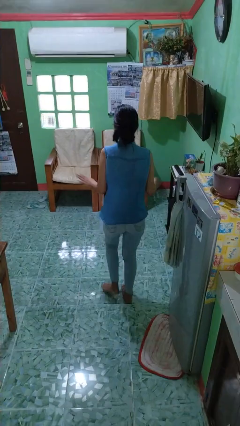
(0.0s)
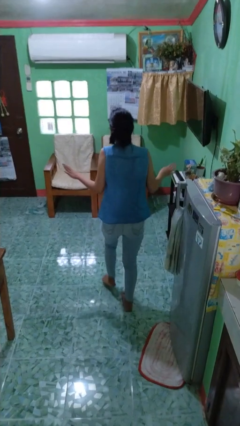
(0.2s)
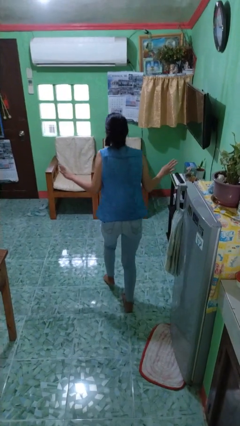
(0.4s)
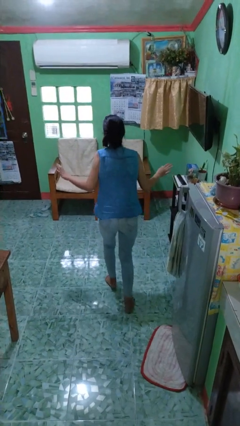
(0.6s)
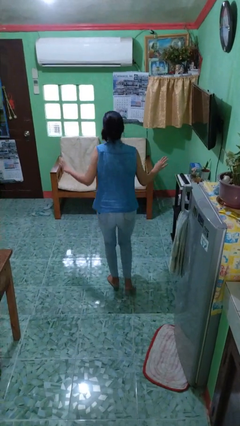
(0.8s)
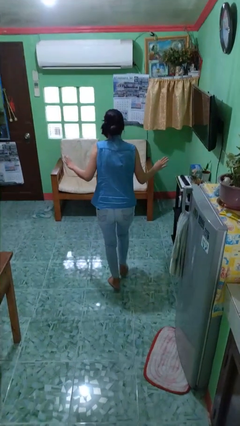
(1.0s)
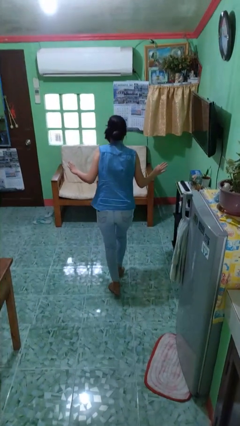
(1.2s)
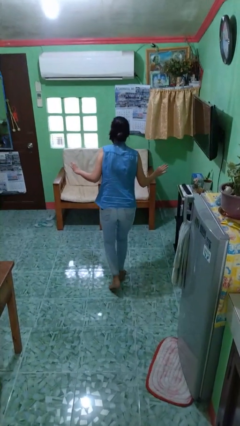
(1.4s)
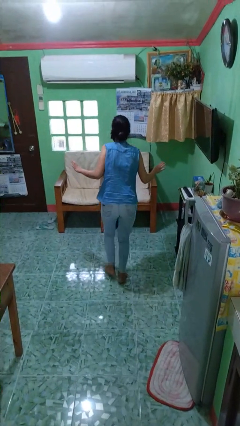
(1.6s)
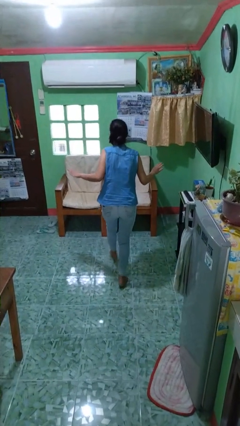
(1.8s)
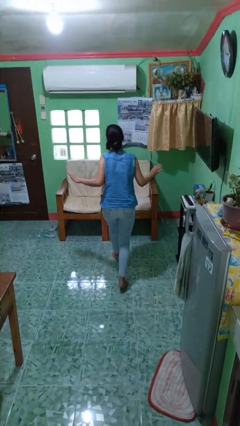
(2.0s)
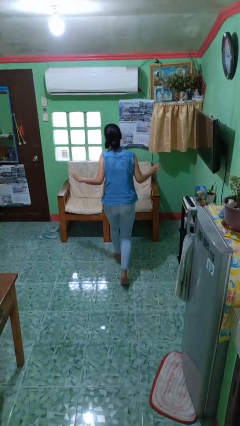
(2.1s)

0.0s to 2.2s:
person walks tiptoe

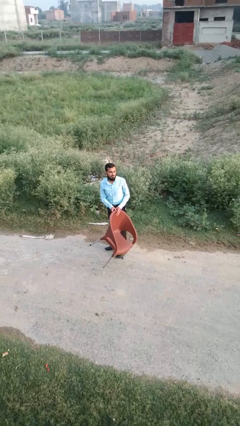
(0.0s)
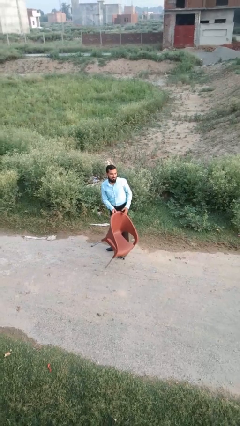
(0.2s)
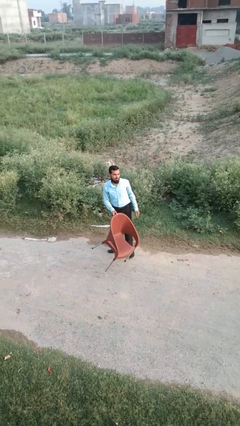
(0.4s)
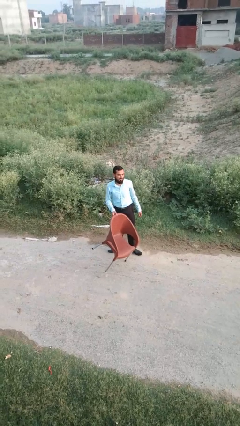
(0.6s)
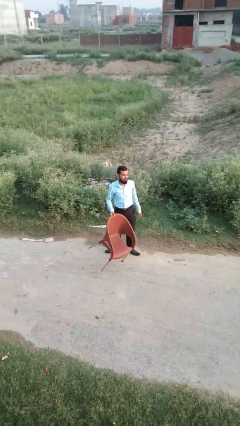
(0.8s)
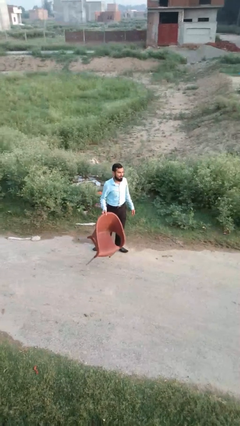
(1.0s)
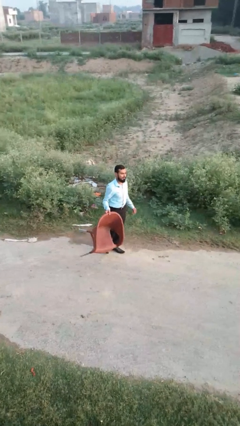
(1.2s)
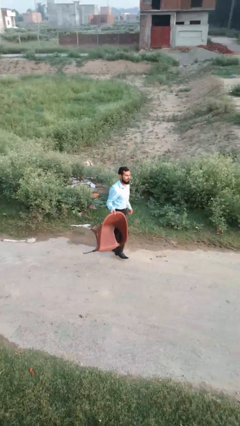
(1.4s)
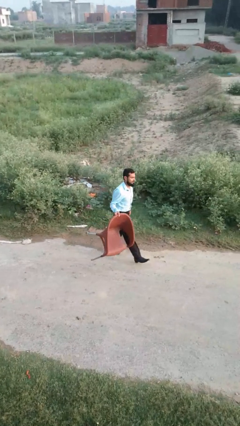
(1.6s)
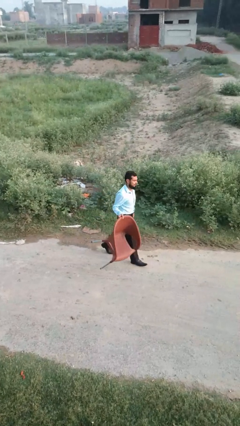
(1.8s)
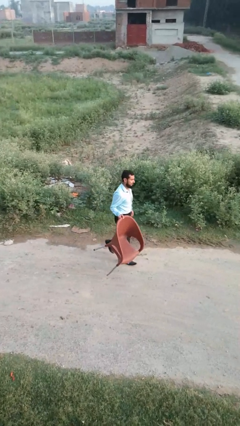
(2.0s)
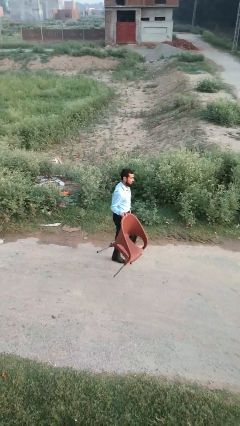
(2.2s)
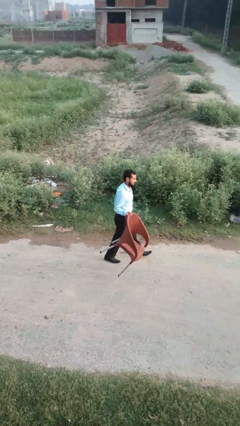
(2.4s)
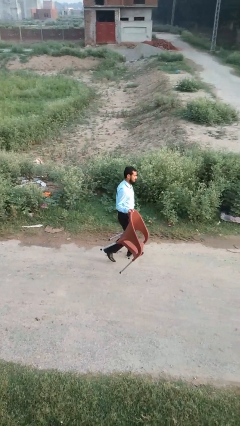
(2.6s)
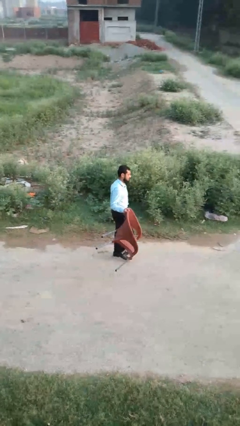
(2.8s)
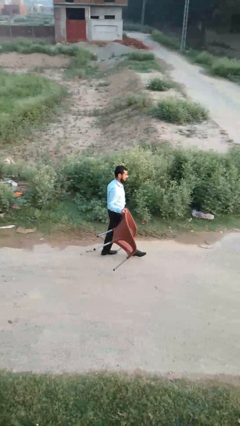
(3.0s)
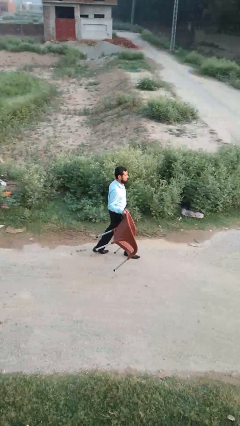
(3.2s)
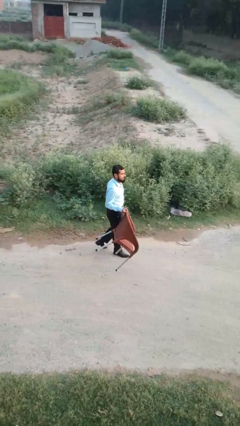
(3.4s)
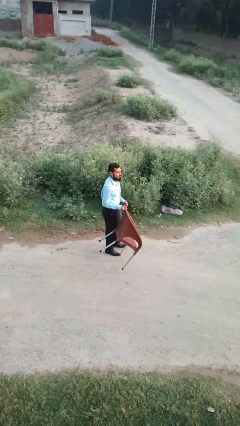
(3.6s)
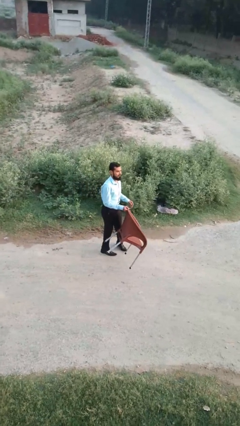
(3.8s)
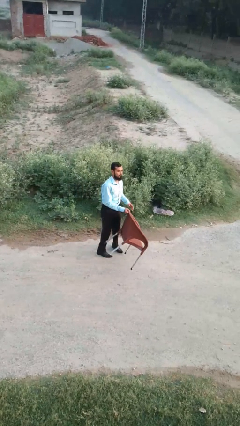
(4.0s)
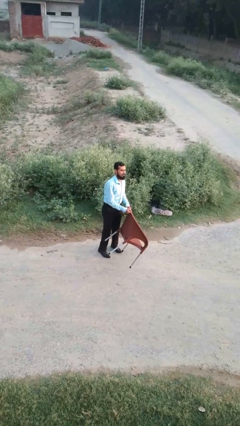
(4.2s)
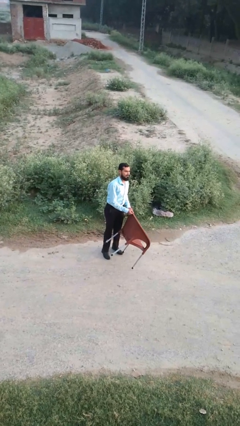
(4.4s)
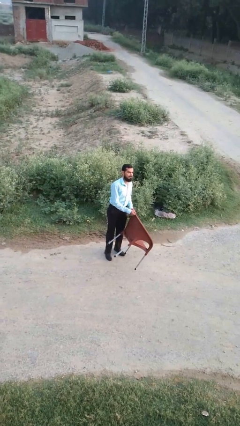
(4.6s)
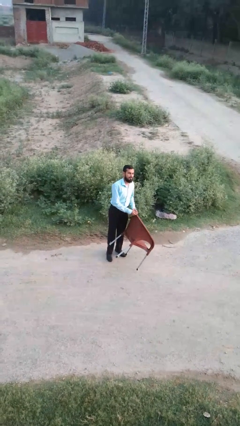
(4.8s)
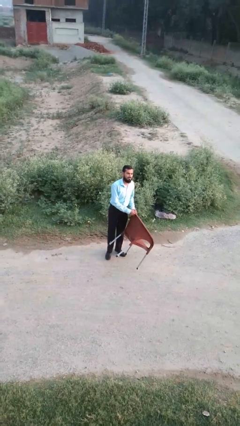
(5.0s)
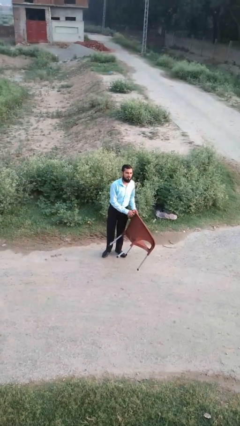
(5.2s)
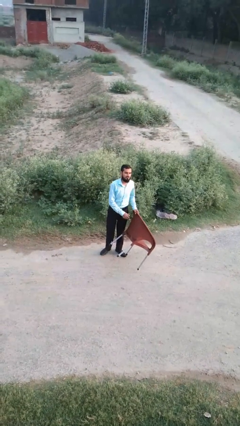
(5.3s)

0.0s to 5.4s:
person carries furniture

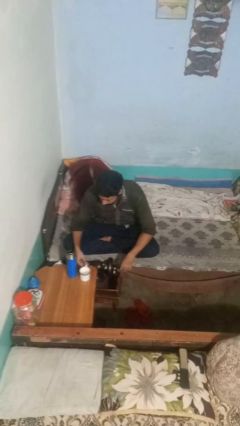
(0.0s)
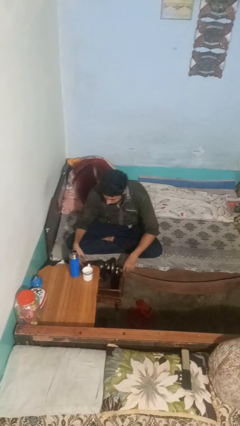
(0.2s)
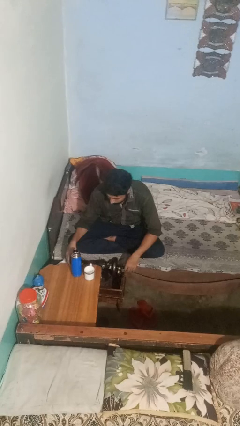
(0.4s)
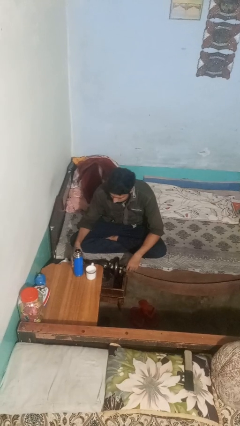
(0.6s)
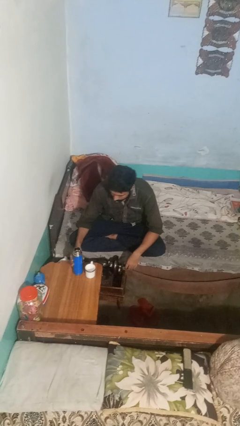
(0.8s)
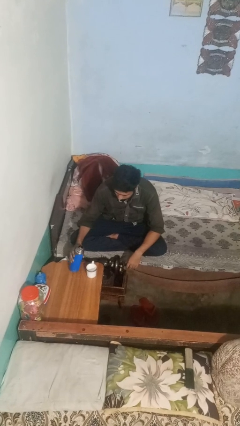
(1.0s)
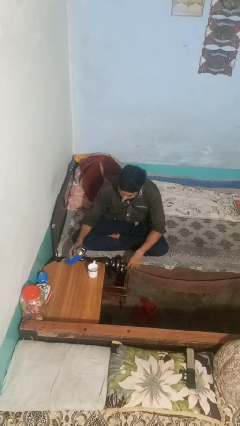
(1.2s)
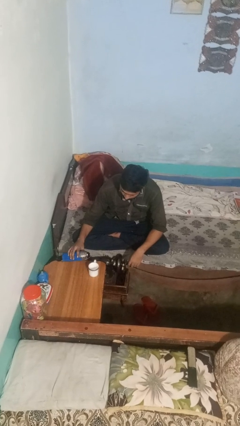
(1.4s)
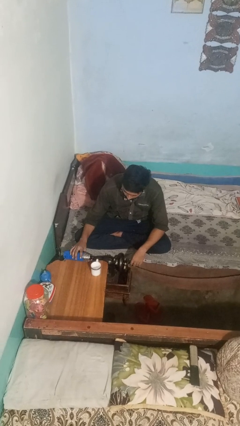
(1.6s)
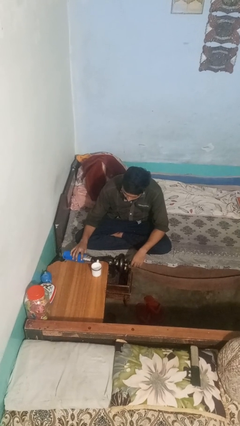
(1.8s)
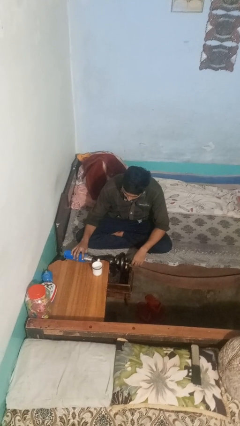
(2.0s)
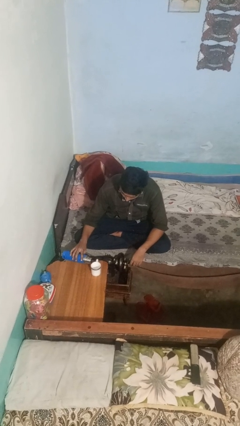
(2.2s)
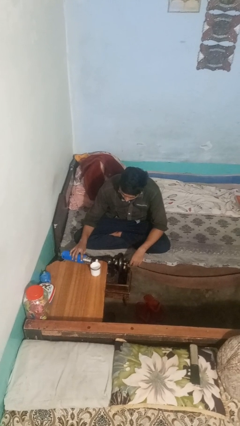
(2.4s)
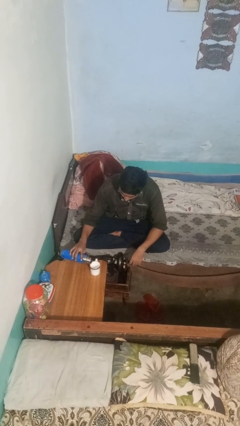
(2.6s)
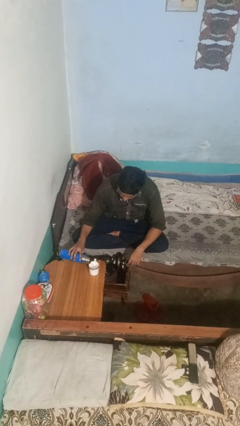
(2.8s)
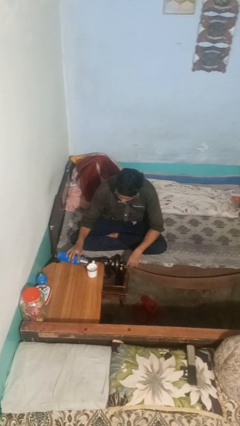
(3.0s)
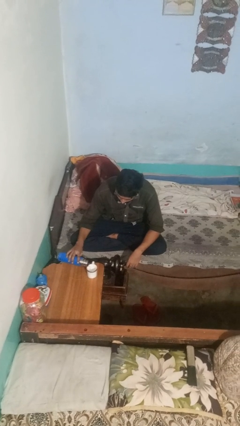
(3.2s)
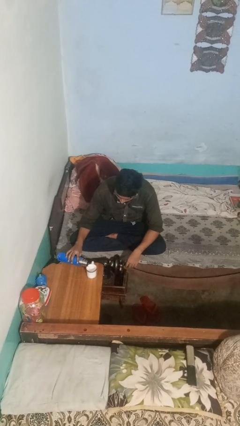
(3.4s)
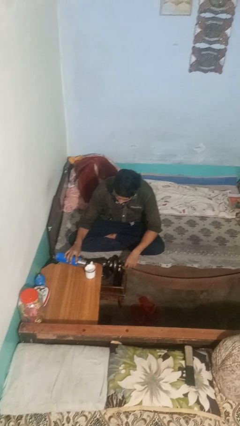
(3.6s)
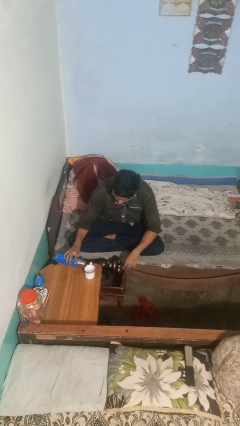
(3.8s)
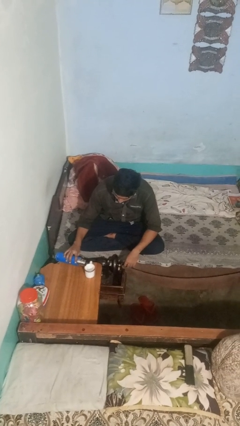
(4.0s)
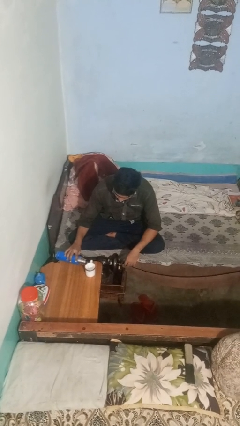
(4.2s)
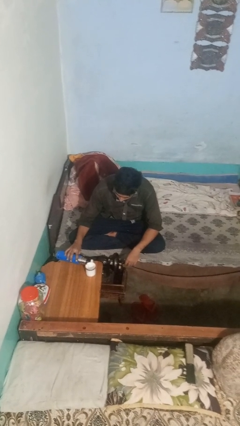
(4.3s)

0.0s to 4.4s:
person pours liquid into cup

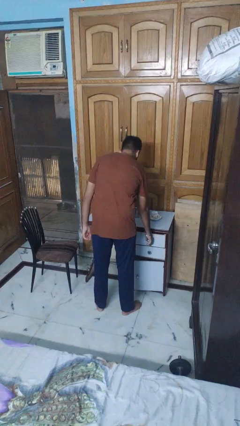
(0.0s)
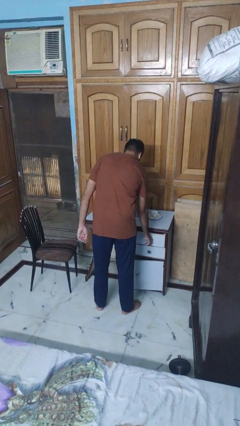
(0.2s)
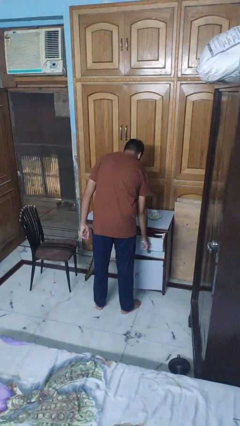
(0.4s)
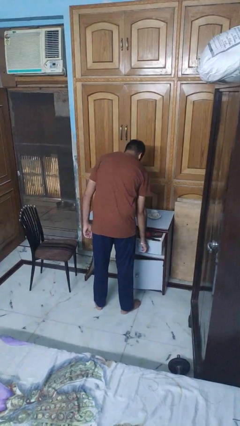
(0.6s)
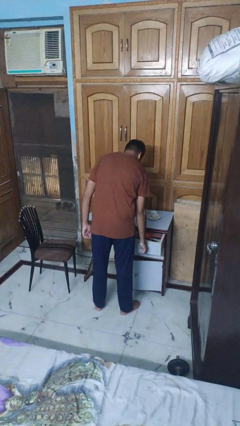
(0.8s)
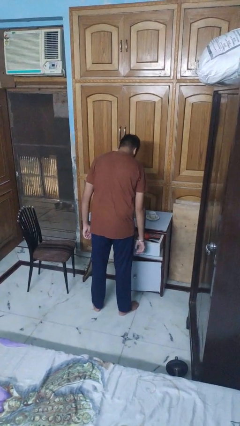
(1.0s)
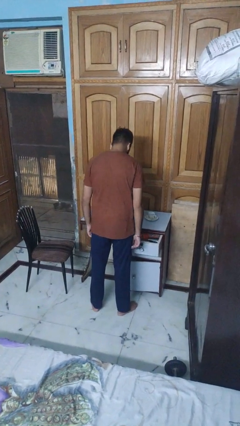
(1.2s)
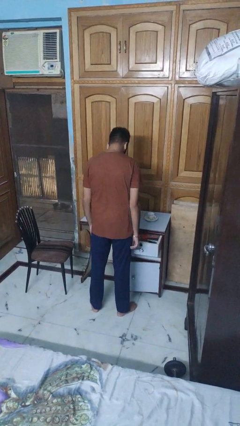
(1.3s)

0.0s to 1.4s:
person opens kitchen drawer

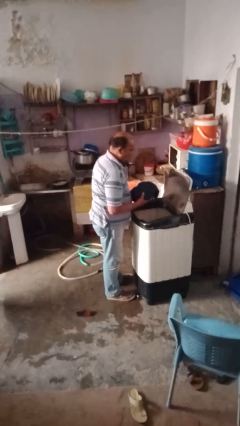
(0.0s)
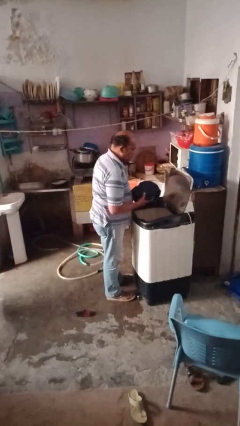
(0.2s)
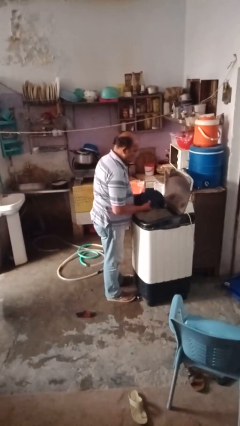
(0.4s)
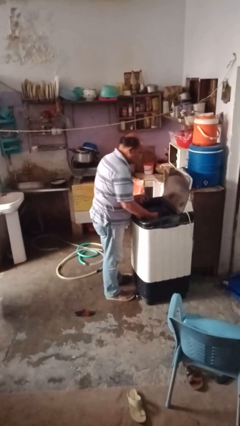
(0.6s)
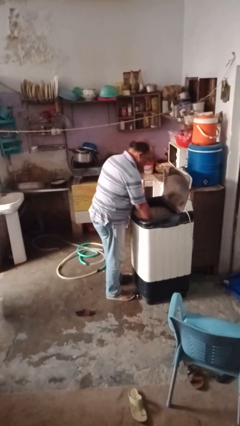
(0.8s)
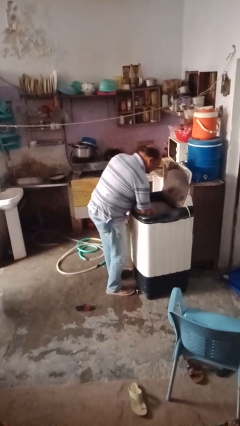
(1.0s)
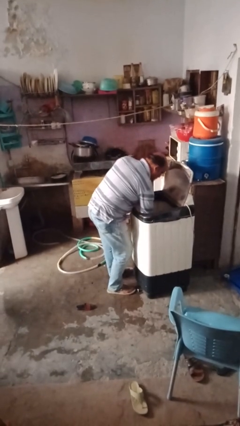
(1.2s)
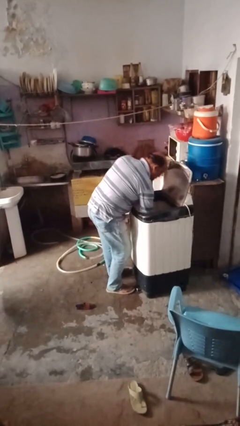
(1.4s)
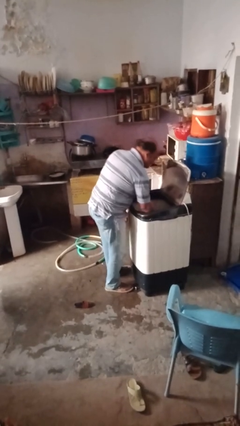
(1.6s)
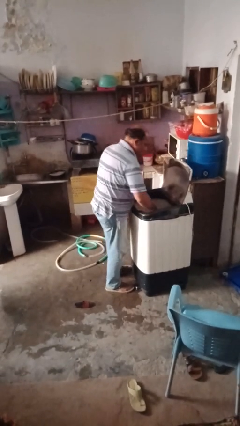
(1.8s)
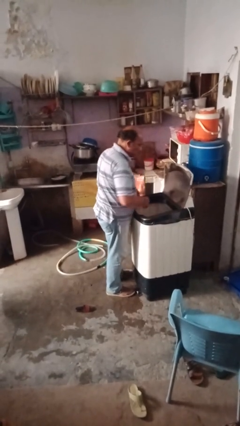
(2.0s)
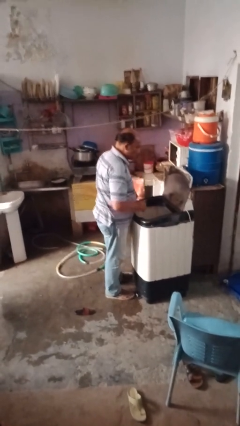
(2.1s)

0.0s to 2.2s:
person loads clotheswasher

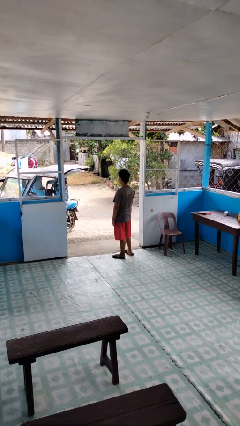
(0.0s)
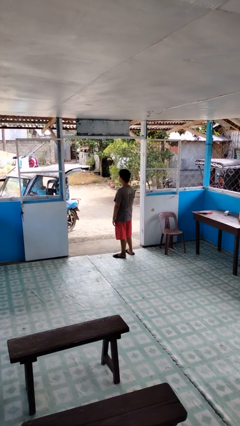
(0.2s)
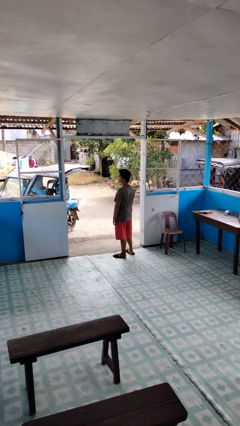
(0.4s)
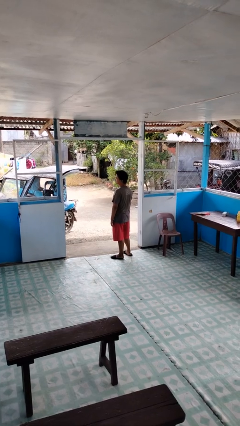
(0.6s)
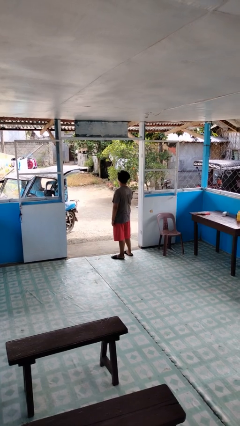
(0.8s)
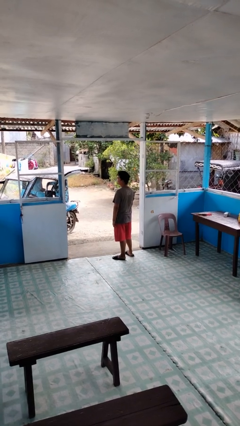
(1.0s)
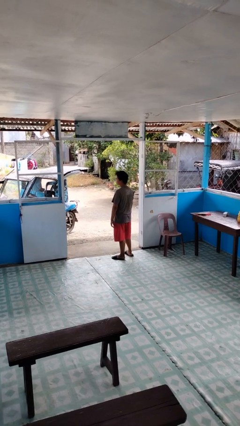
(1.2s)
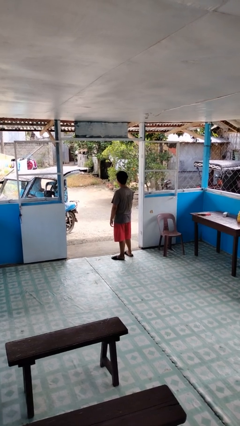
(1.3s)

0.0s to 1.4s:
person shakes head

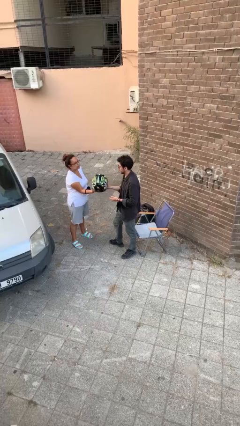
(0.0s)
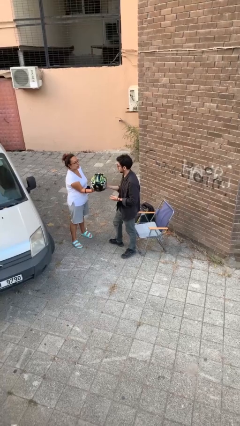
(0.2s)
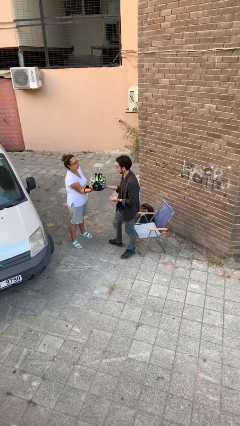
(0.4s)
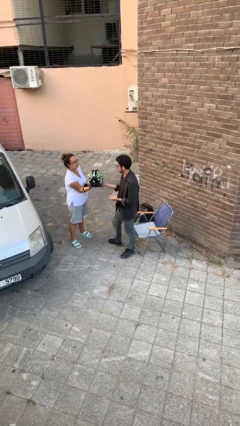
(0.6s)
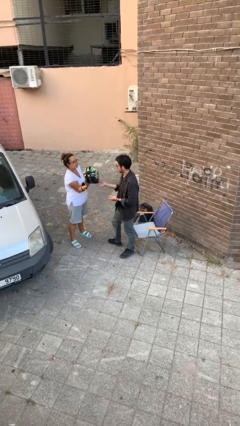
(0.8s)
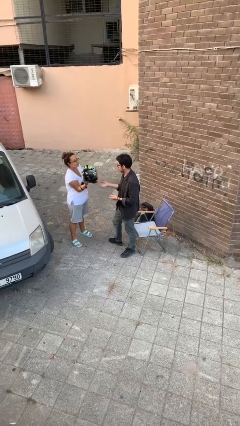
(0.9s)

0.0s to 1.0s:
person transfers object to person
